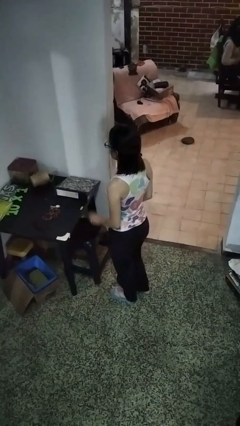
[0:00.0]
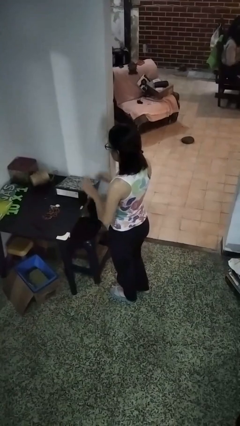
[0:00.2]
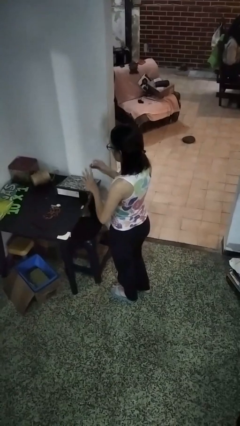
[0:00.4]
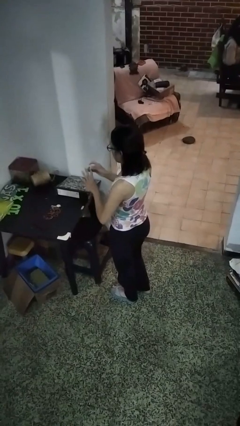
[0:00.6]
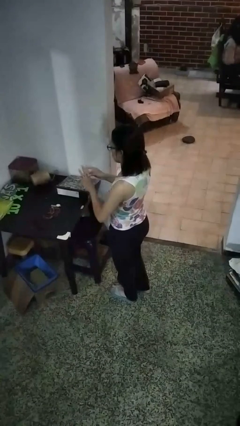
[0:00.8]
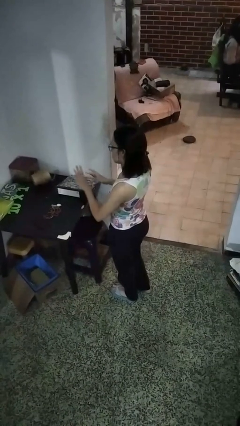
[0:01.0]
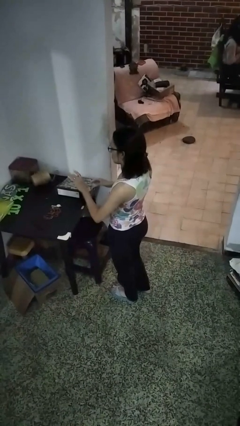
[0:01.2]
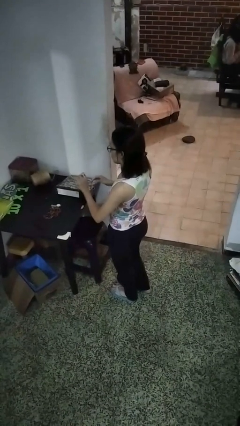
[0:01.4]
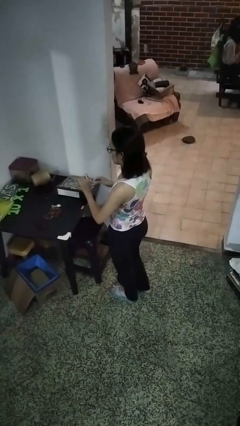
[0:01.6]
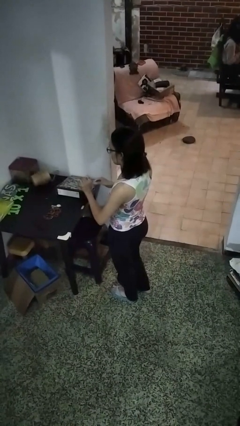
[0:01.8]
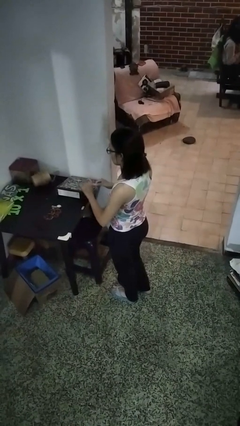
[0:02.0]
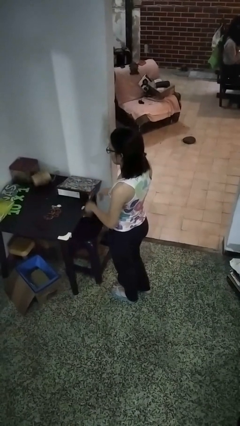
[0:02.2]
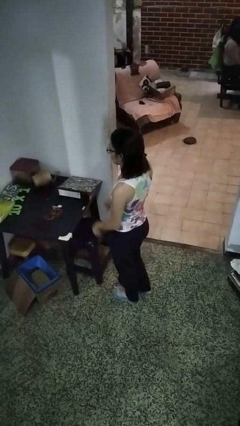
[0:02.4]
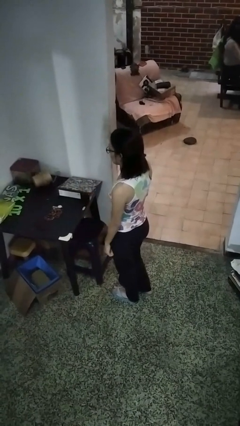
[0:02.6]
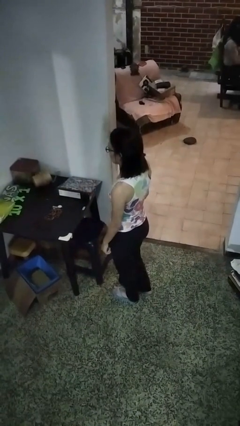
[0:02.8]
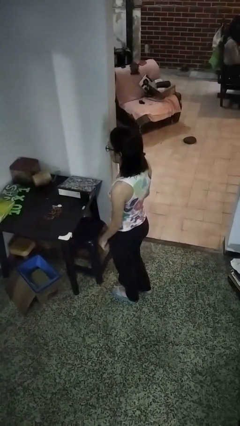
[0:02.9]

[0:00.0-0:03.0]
person puts on ring

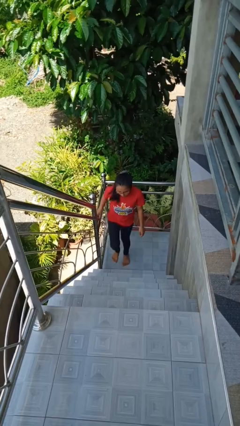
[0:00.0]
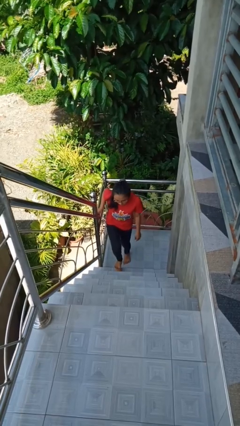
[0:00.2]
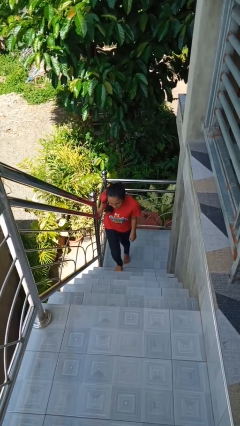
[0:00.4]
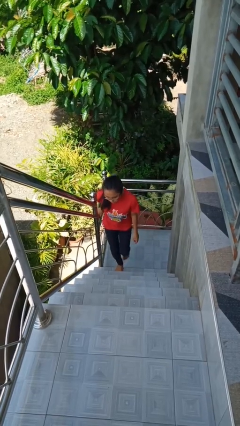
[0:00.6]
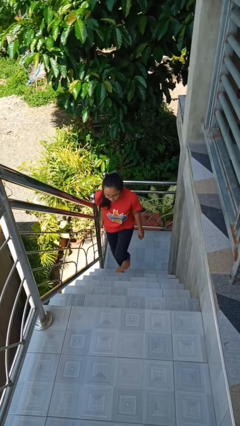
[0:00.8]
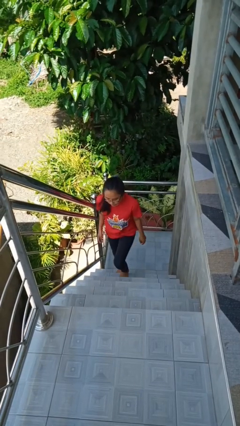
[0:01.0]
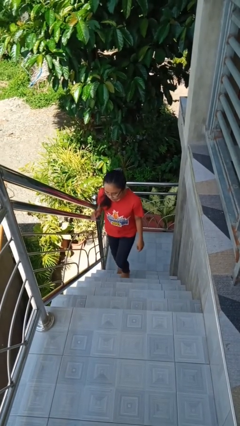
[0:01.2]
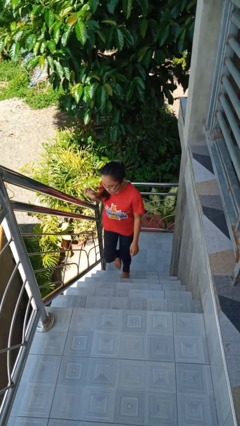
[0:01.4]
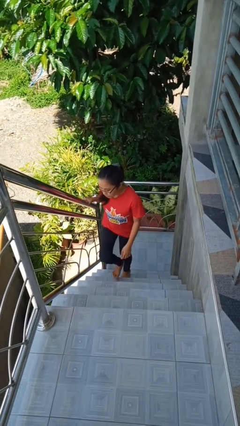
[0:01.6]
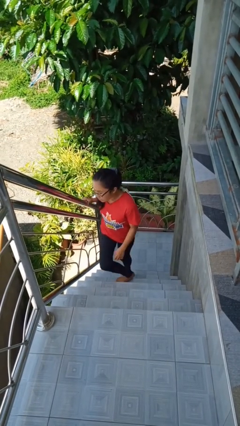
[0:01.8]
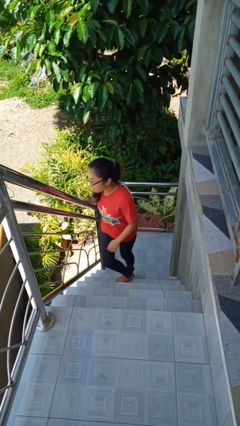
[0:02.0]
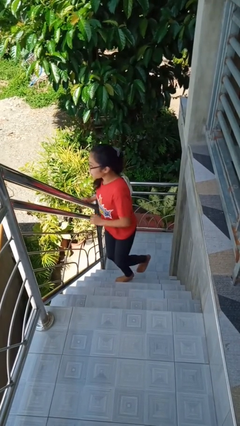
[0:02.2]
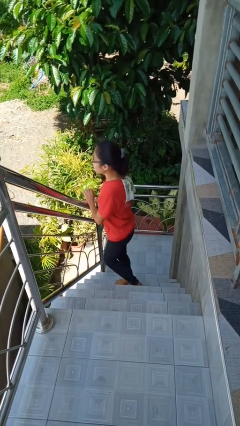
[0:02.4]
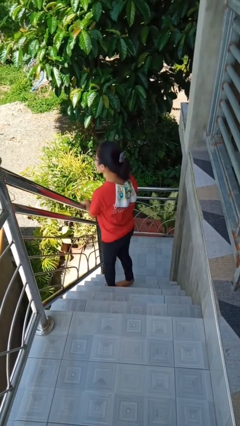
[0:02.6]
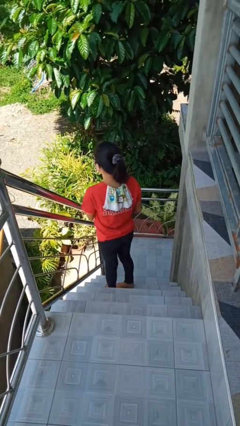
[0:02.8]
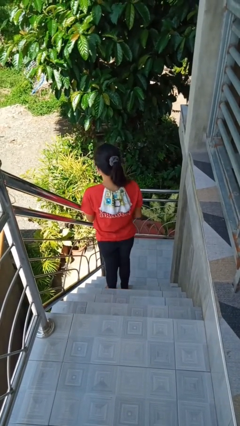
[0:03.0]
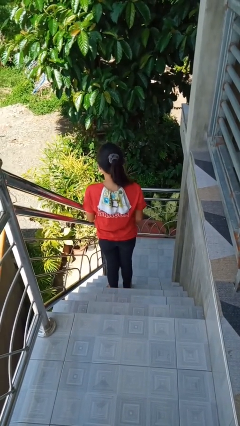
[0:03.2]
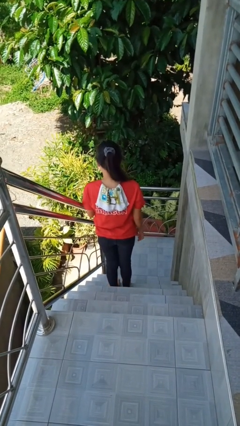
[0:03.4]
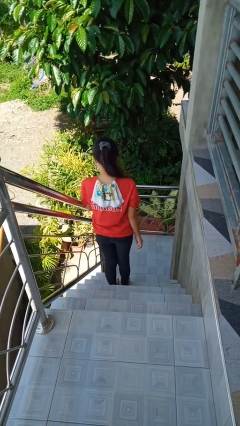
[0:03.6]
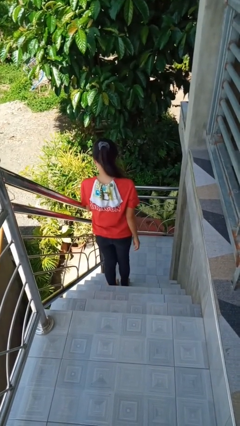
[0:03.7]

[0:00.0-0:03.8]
person climbs up stairs

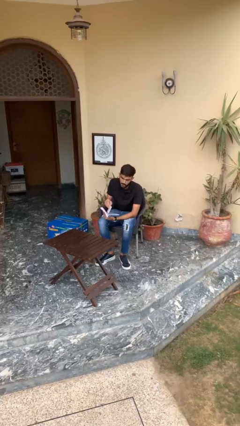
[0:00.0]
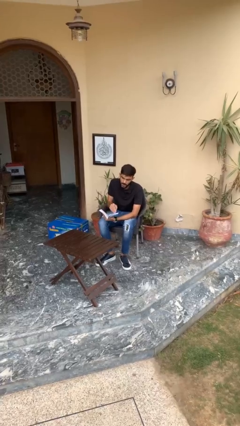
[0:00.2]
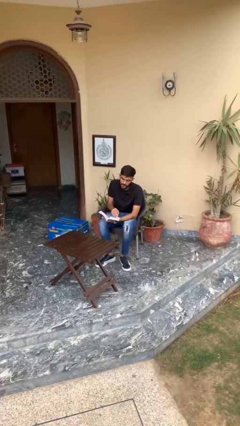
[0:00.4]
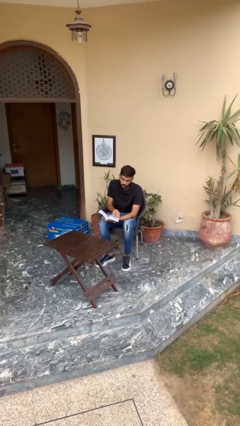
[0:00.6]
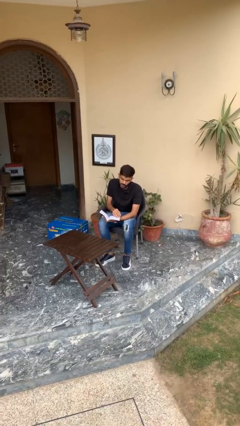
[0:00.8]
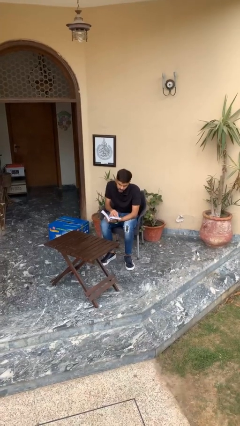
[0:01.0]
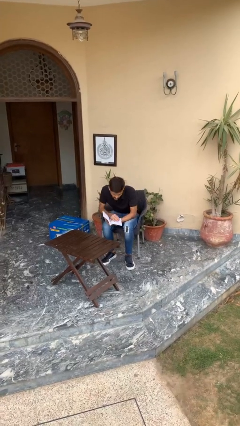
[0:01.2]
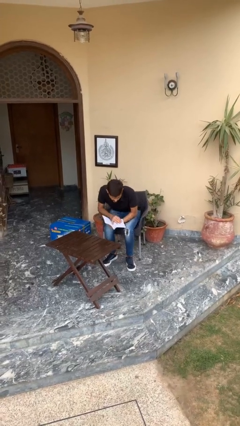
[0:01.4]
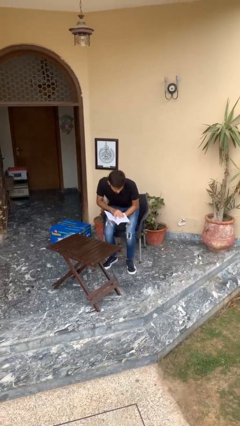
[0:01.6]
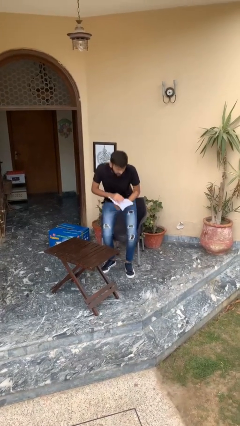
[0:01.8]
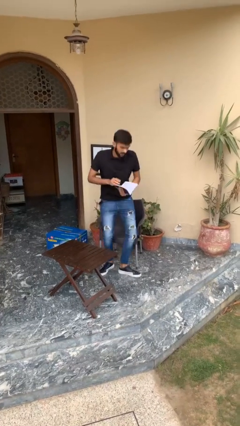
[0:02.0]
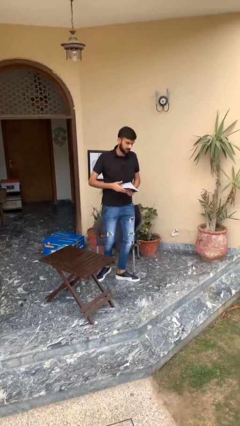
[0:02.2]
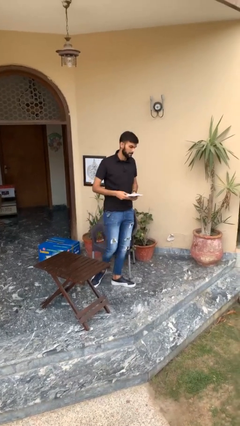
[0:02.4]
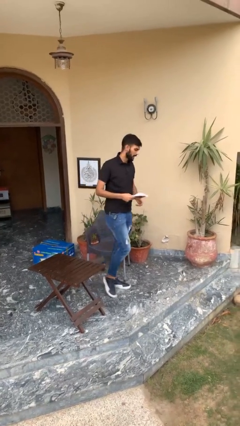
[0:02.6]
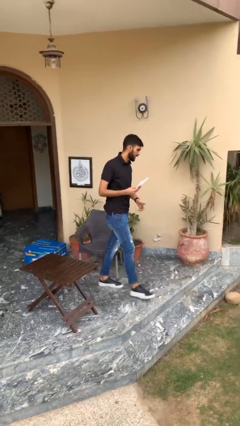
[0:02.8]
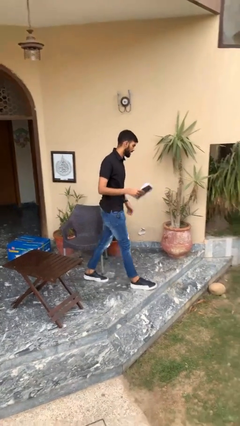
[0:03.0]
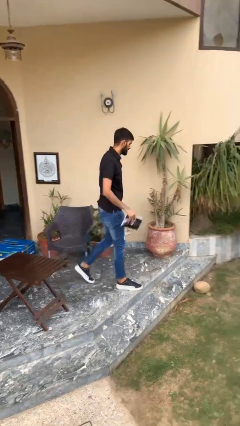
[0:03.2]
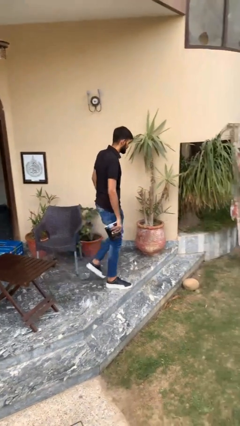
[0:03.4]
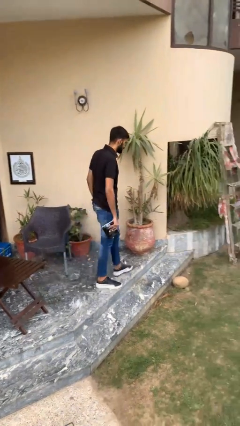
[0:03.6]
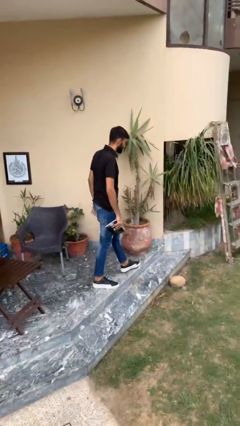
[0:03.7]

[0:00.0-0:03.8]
person stands up

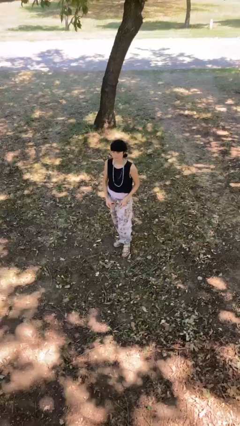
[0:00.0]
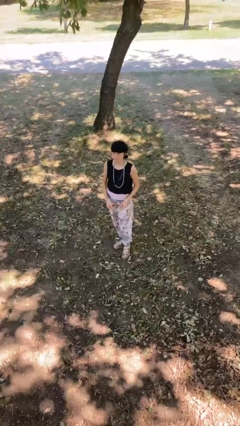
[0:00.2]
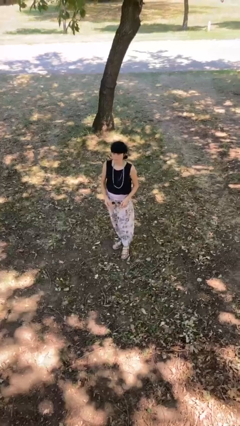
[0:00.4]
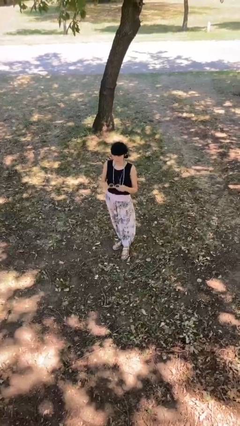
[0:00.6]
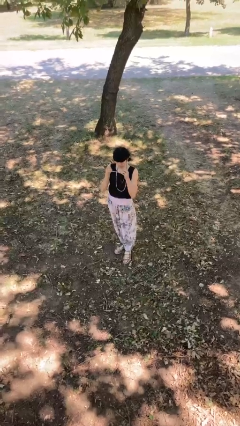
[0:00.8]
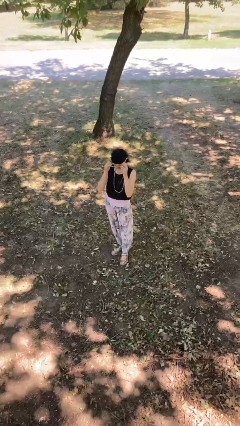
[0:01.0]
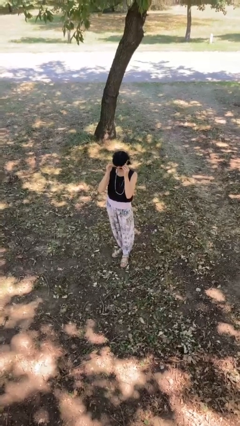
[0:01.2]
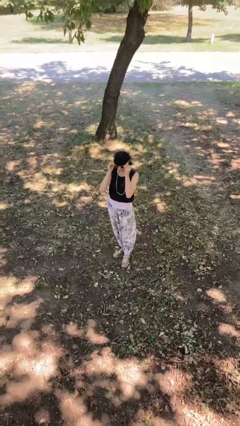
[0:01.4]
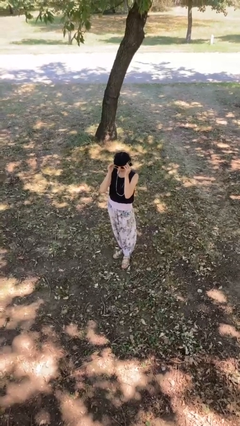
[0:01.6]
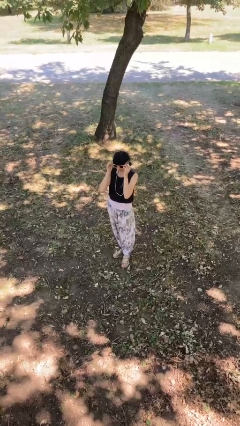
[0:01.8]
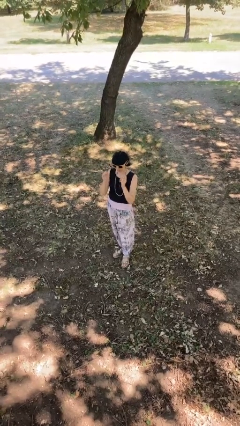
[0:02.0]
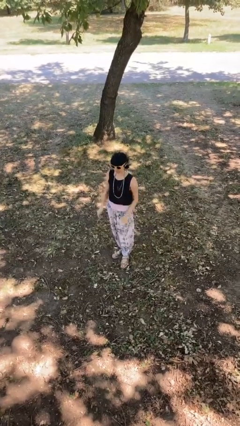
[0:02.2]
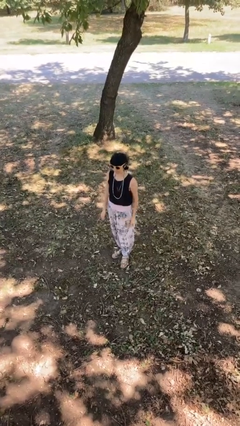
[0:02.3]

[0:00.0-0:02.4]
person puts on sunglasses

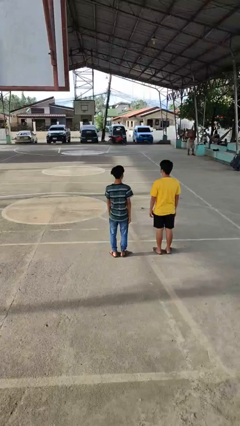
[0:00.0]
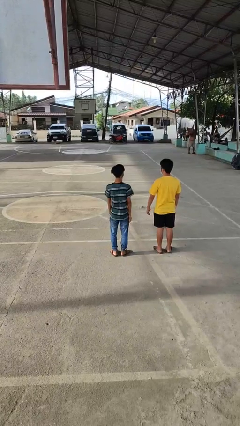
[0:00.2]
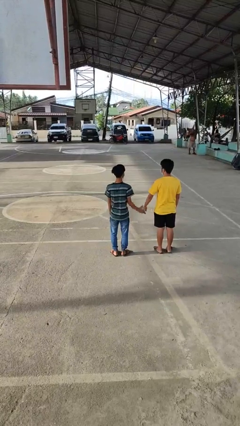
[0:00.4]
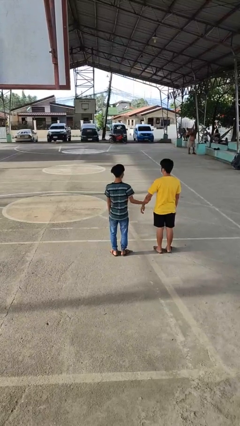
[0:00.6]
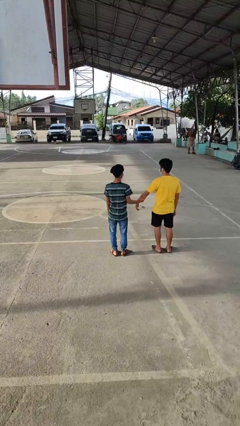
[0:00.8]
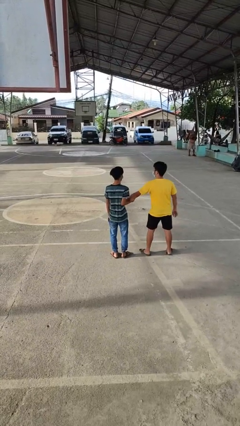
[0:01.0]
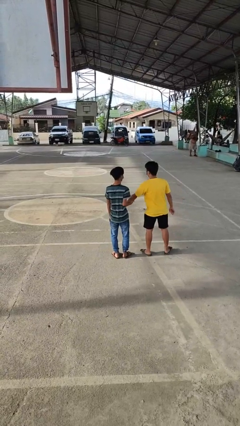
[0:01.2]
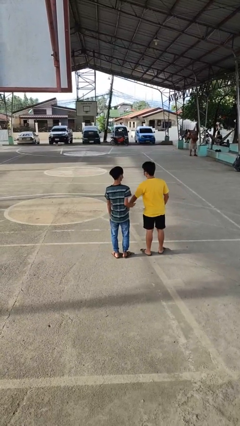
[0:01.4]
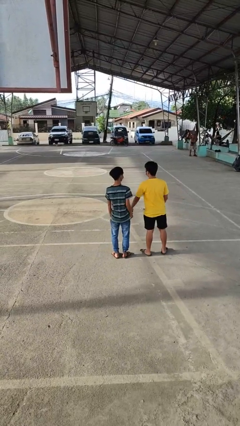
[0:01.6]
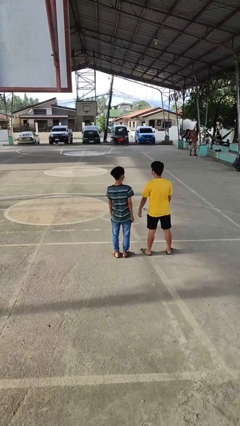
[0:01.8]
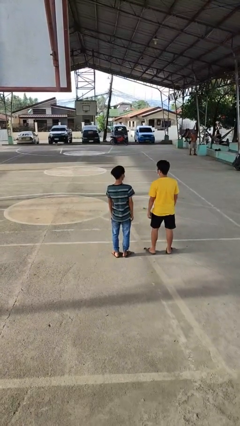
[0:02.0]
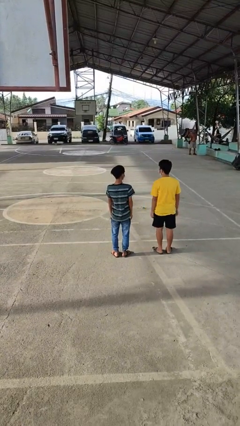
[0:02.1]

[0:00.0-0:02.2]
person grabs person by forearm

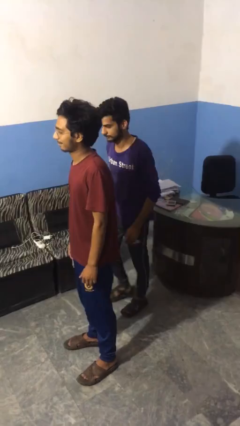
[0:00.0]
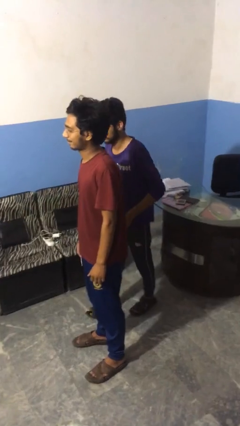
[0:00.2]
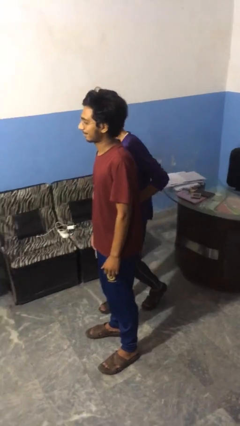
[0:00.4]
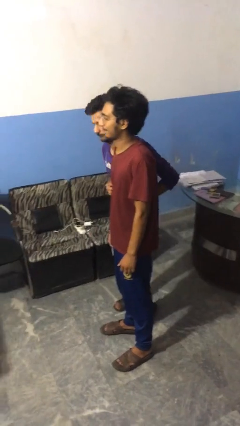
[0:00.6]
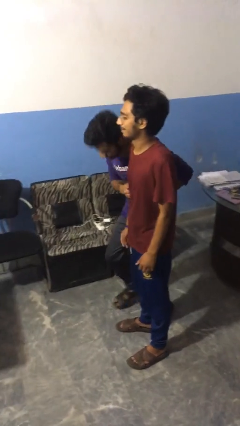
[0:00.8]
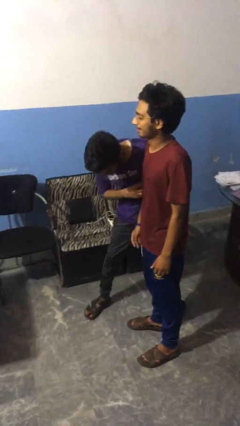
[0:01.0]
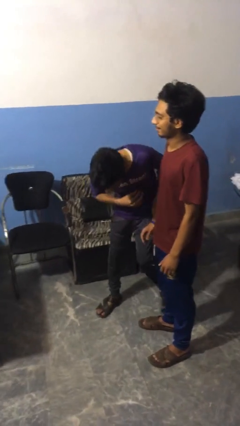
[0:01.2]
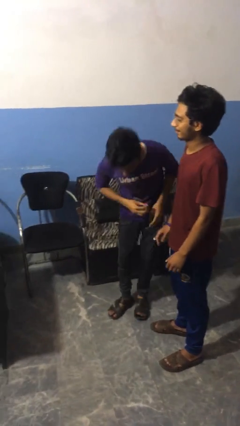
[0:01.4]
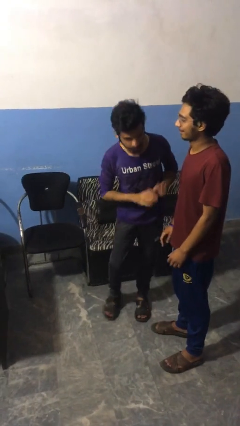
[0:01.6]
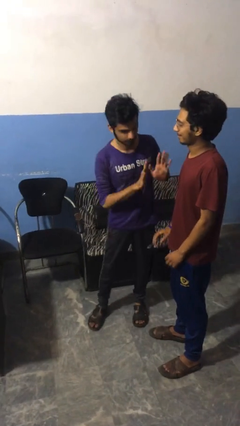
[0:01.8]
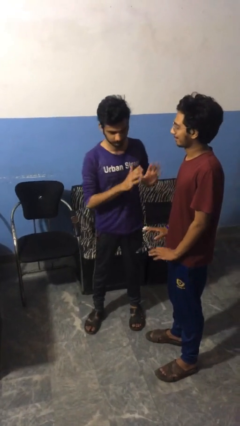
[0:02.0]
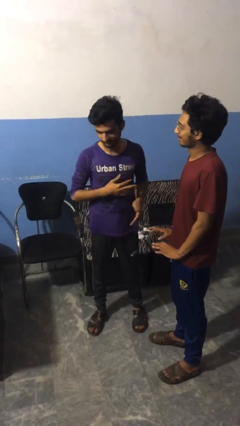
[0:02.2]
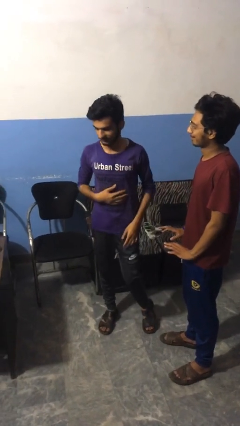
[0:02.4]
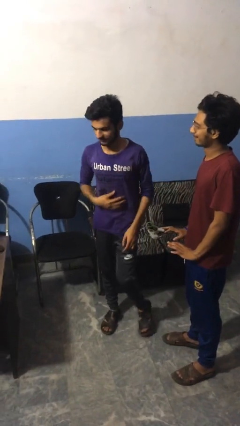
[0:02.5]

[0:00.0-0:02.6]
person bumps into person
